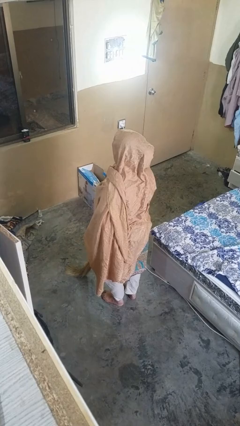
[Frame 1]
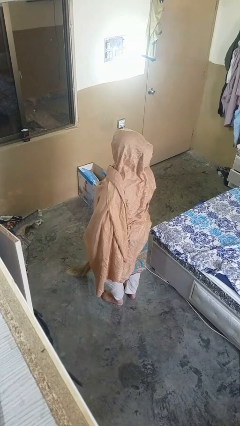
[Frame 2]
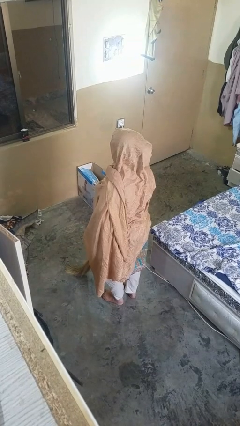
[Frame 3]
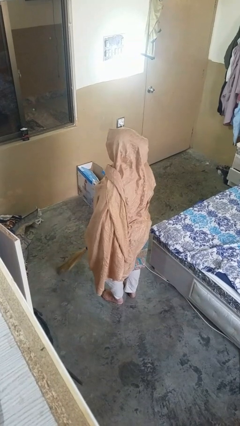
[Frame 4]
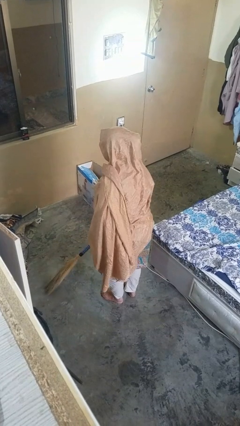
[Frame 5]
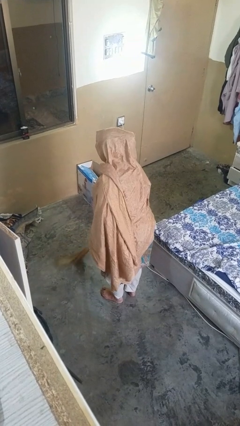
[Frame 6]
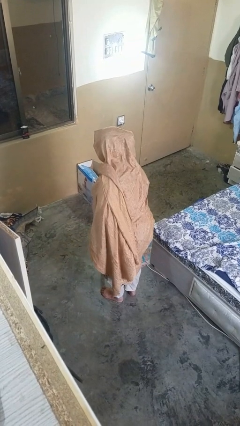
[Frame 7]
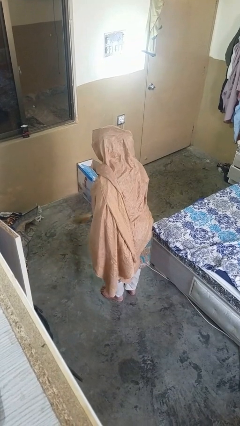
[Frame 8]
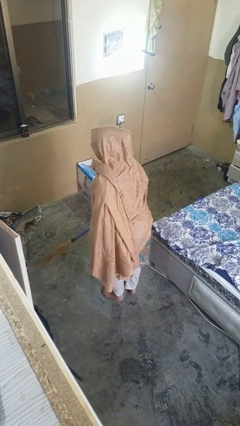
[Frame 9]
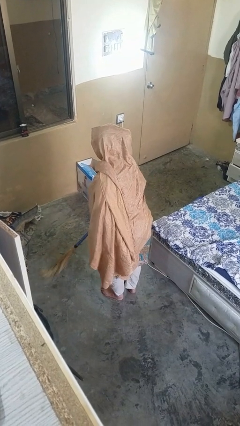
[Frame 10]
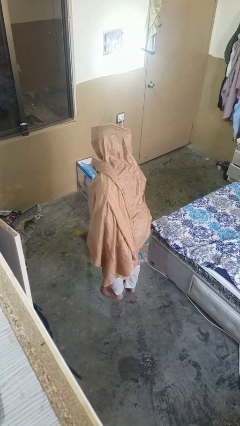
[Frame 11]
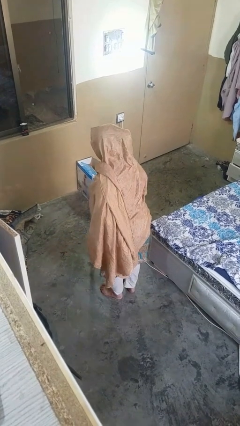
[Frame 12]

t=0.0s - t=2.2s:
person sweeps floor

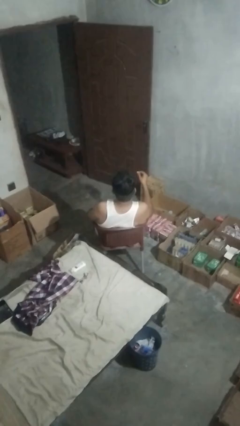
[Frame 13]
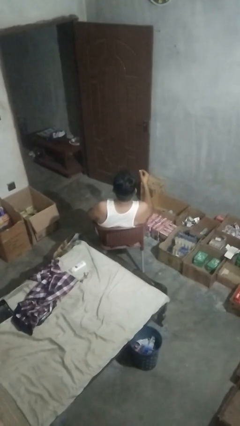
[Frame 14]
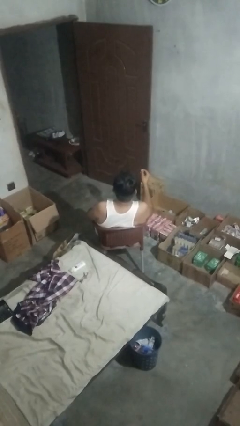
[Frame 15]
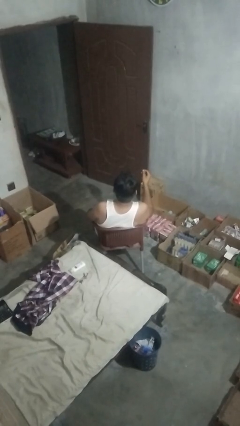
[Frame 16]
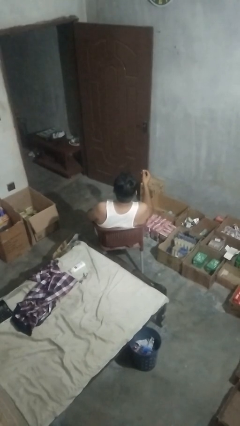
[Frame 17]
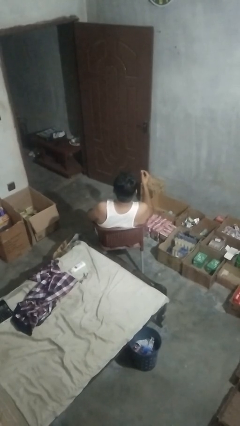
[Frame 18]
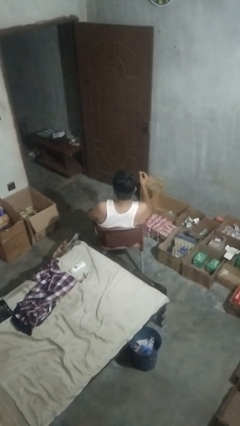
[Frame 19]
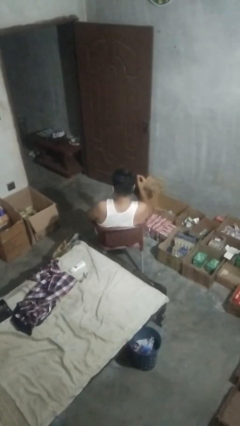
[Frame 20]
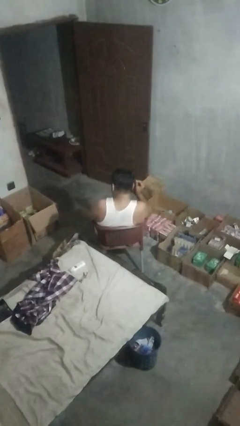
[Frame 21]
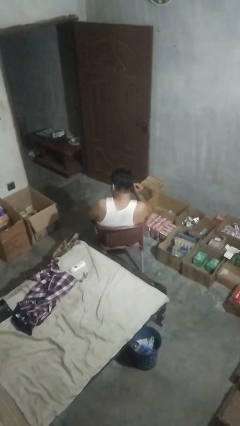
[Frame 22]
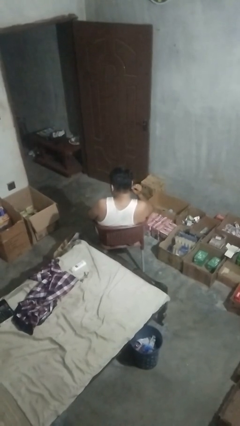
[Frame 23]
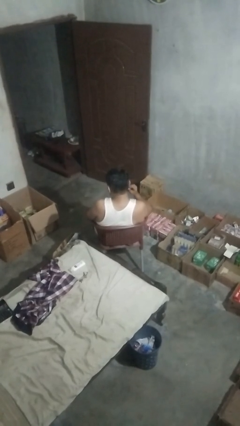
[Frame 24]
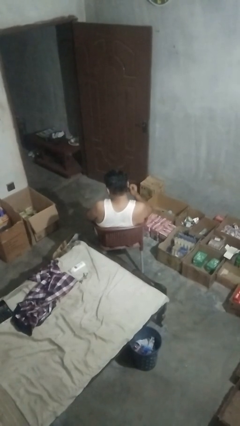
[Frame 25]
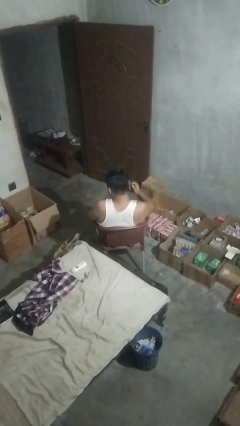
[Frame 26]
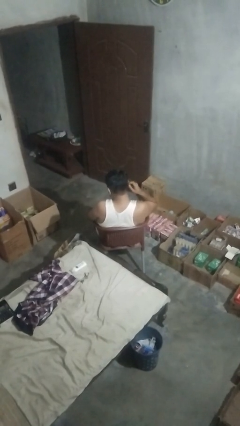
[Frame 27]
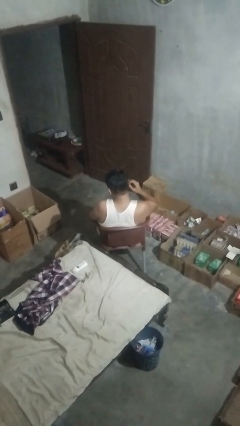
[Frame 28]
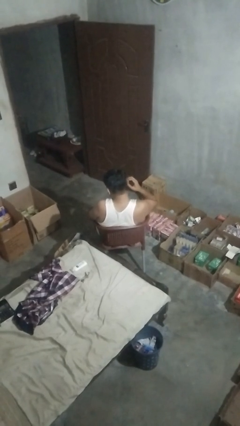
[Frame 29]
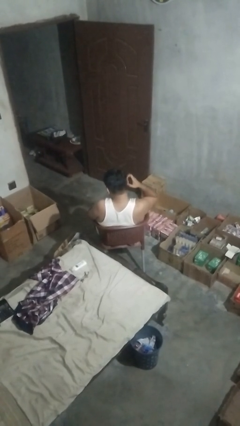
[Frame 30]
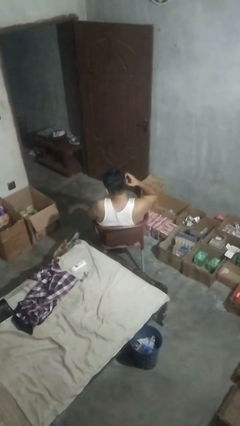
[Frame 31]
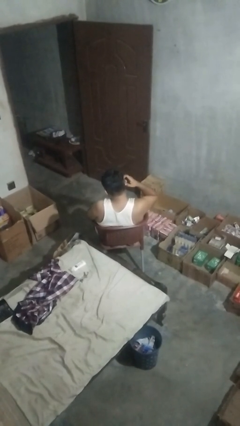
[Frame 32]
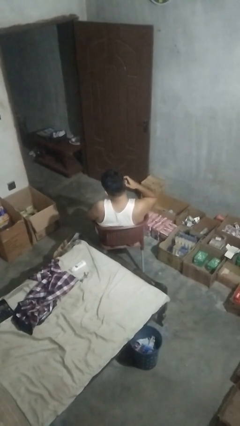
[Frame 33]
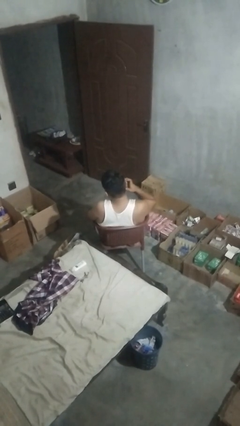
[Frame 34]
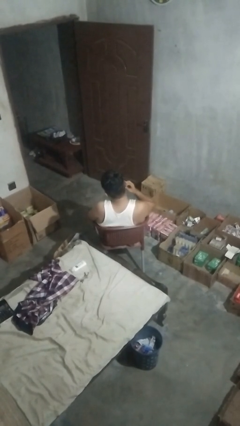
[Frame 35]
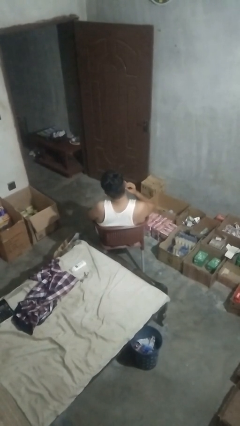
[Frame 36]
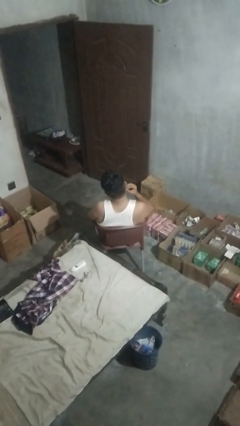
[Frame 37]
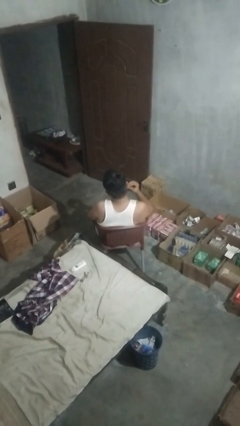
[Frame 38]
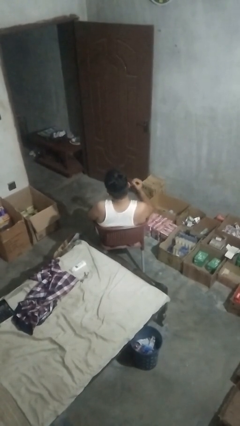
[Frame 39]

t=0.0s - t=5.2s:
person puts on earrings

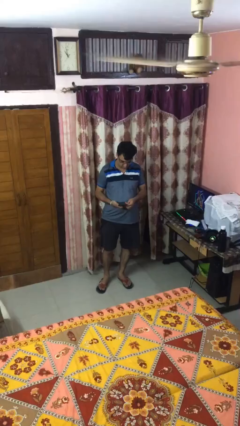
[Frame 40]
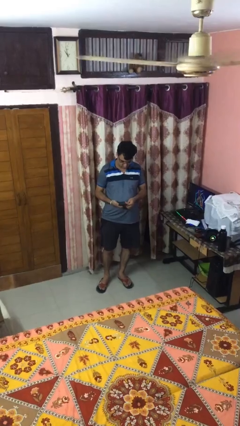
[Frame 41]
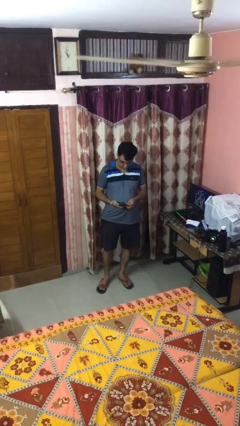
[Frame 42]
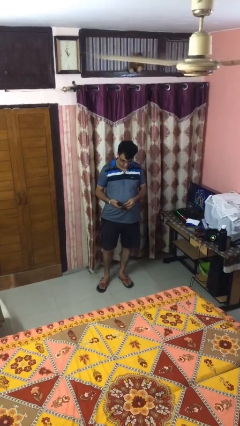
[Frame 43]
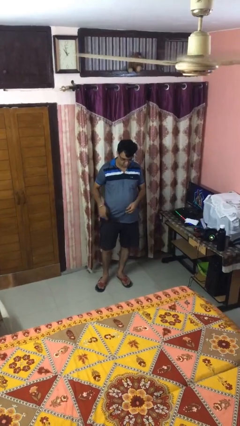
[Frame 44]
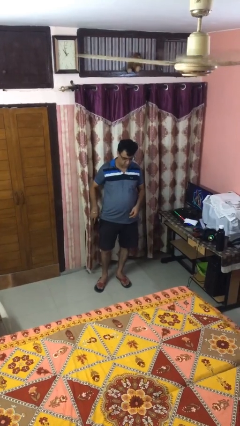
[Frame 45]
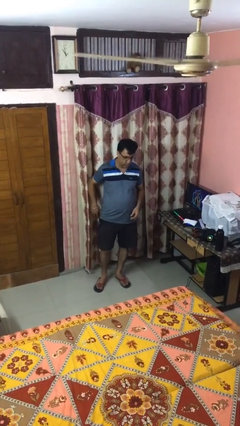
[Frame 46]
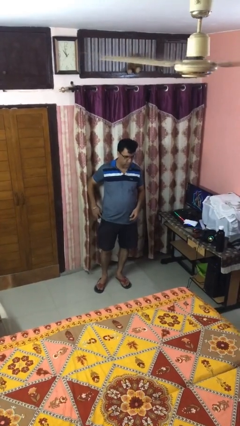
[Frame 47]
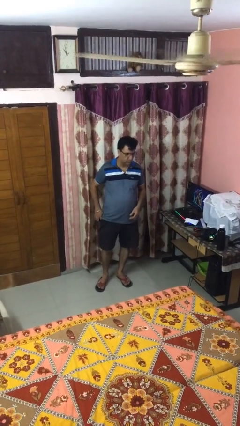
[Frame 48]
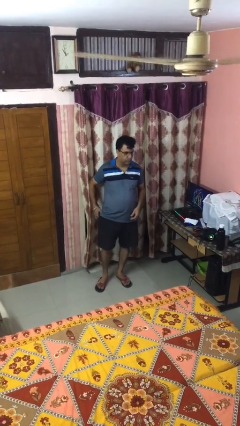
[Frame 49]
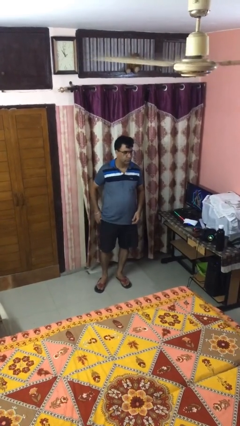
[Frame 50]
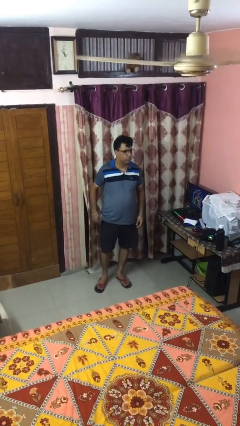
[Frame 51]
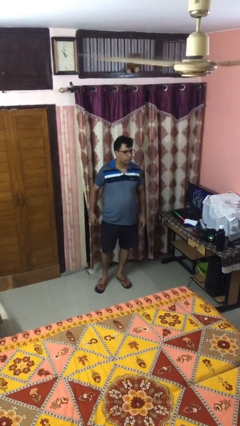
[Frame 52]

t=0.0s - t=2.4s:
person puts phone into pocket

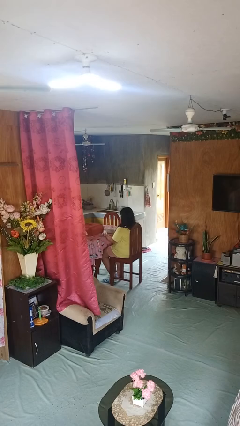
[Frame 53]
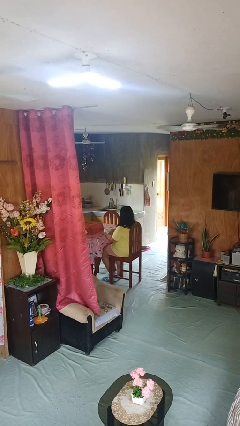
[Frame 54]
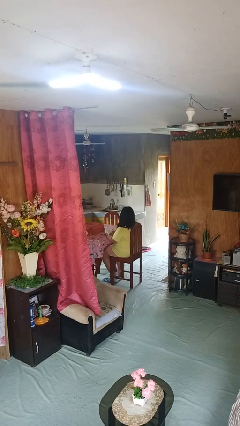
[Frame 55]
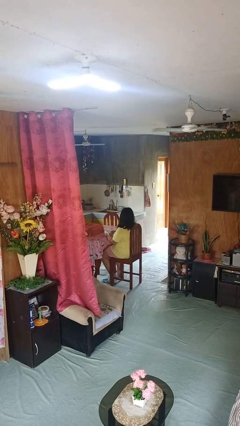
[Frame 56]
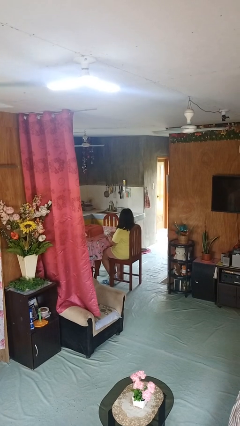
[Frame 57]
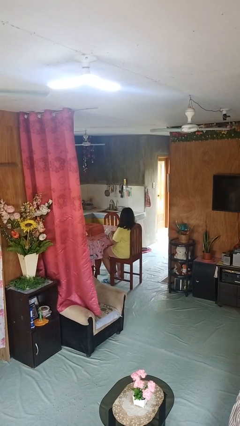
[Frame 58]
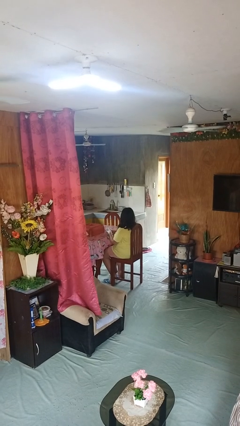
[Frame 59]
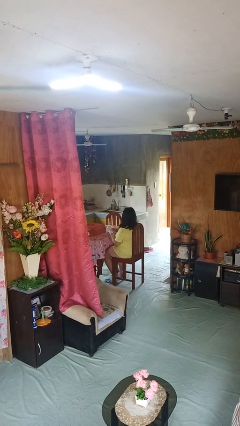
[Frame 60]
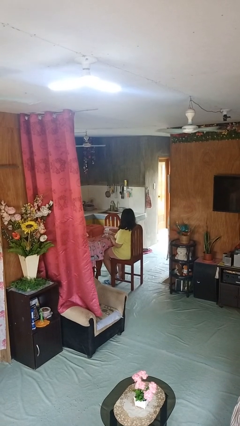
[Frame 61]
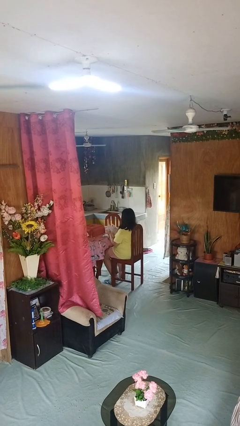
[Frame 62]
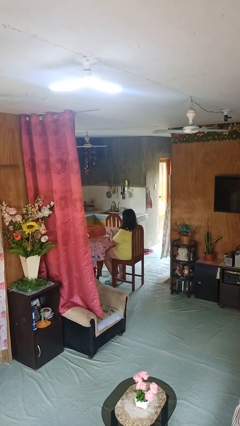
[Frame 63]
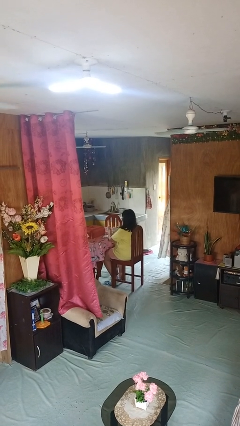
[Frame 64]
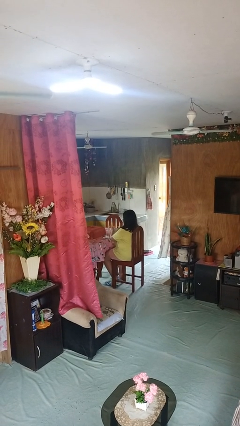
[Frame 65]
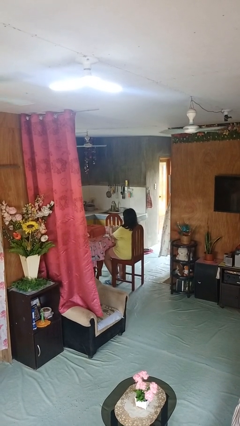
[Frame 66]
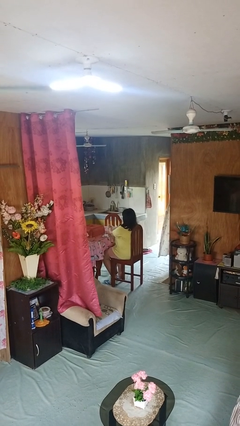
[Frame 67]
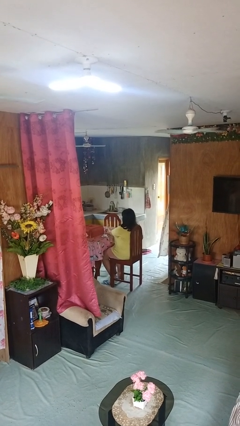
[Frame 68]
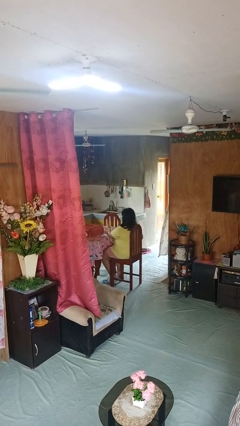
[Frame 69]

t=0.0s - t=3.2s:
person takes off gloves

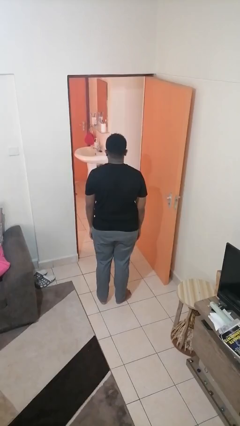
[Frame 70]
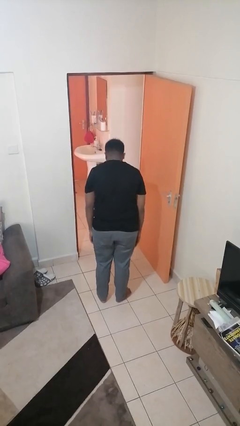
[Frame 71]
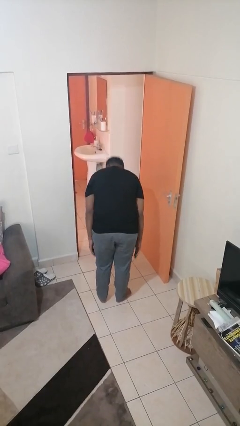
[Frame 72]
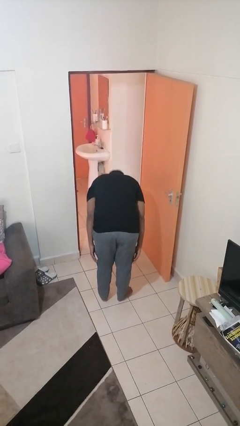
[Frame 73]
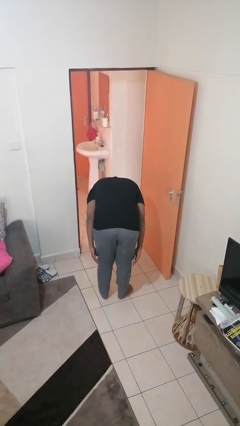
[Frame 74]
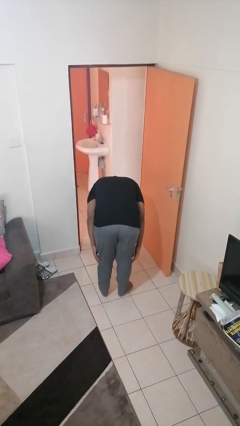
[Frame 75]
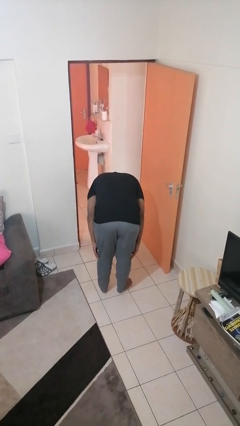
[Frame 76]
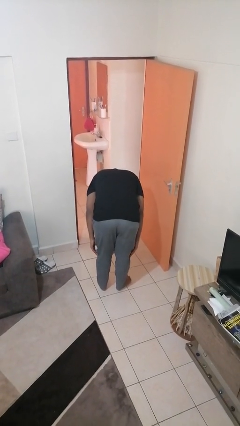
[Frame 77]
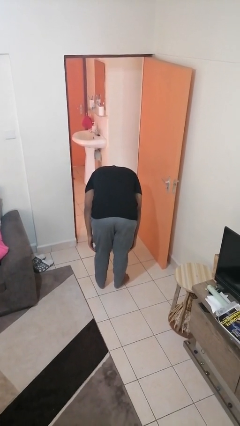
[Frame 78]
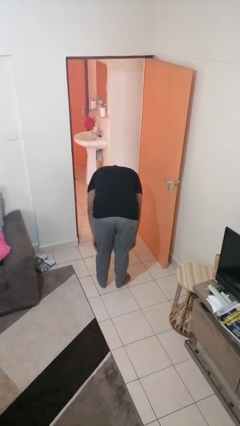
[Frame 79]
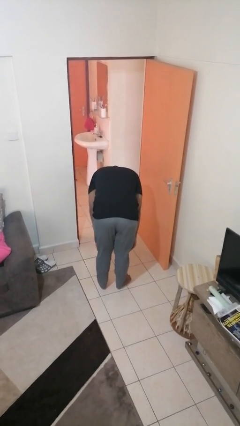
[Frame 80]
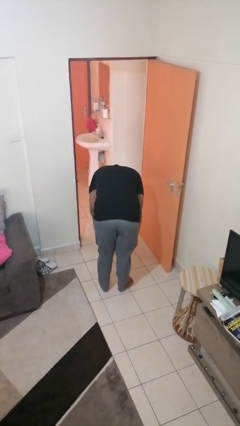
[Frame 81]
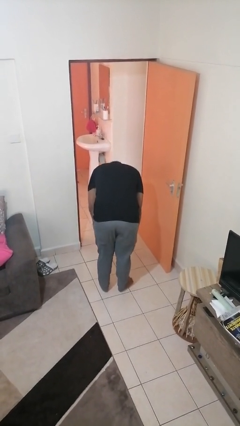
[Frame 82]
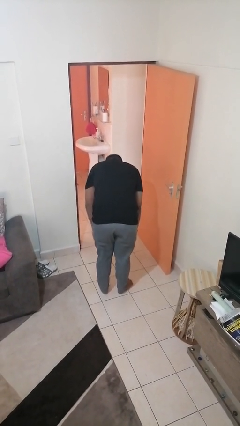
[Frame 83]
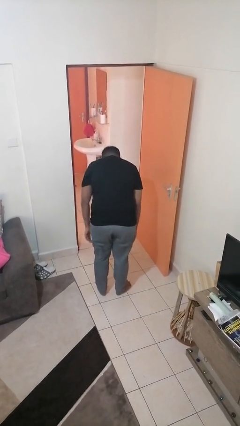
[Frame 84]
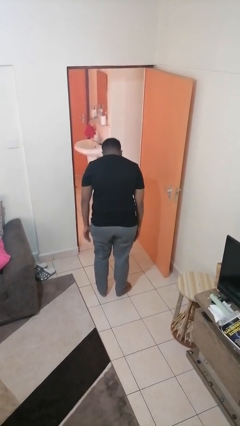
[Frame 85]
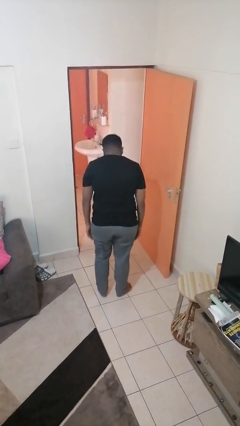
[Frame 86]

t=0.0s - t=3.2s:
person bows

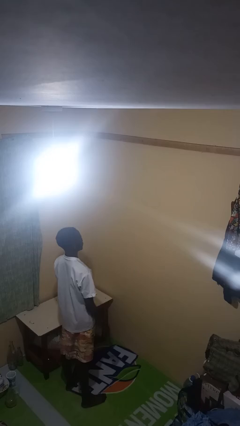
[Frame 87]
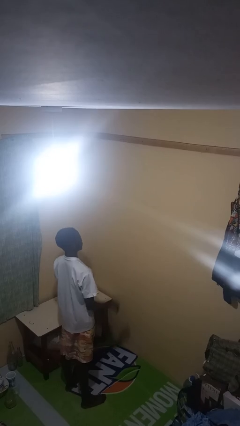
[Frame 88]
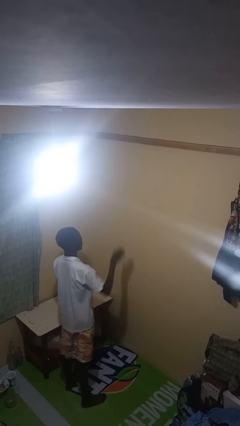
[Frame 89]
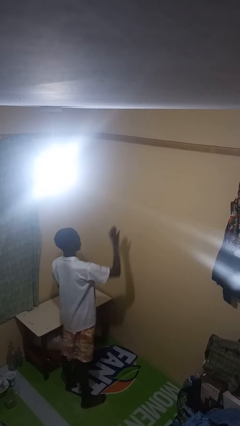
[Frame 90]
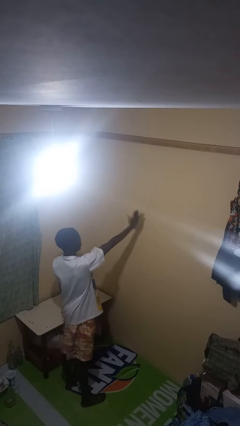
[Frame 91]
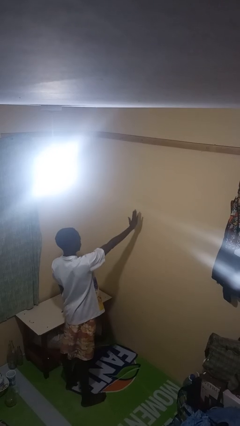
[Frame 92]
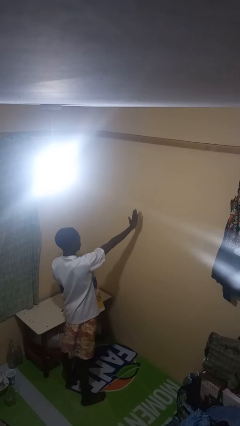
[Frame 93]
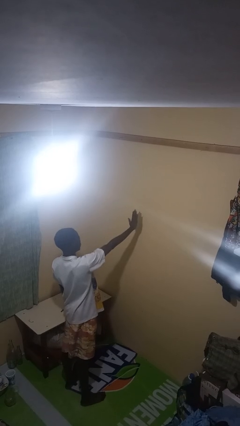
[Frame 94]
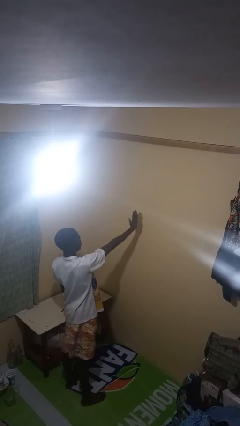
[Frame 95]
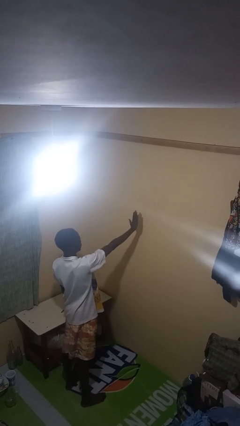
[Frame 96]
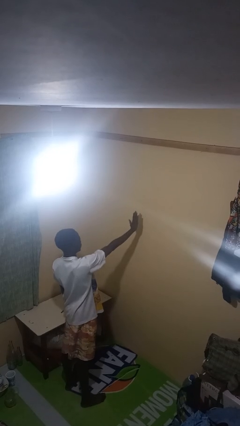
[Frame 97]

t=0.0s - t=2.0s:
person gestures stop
